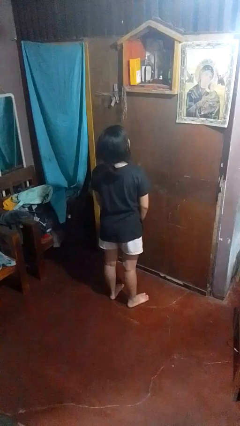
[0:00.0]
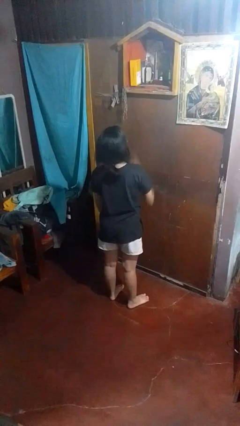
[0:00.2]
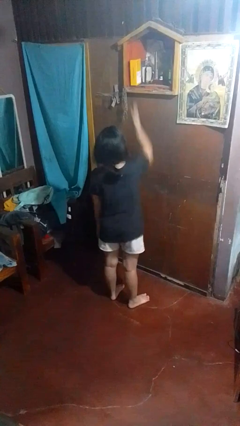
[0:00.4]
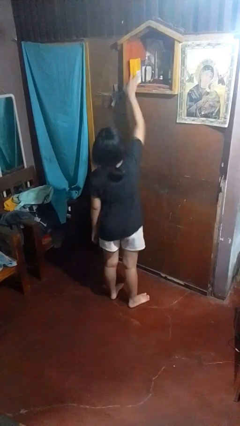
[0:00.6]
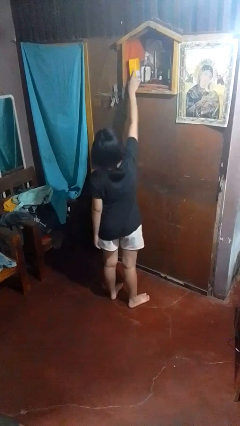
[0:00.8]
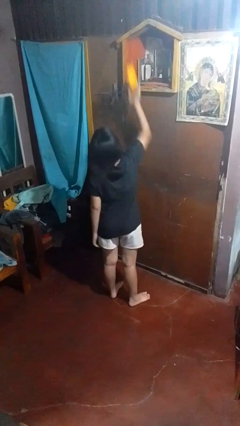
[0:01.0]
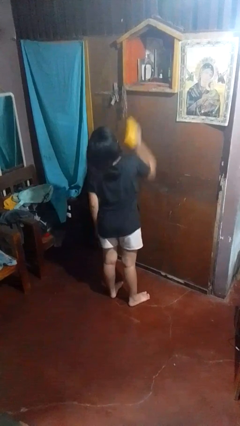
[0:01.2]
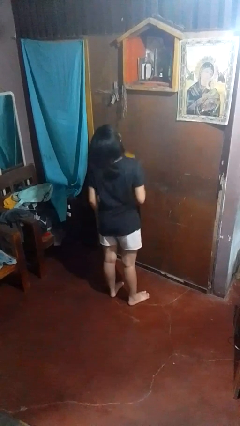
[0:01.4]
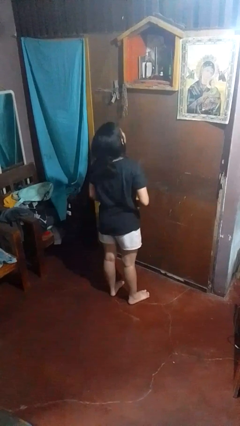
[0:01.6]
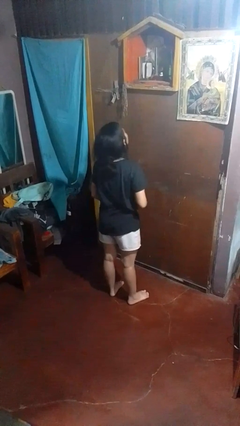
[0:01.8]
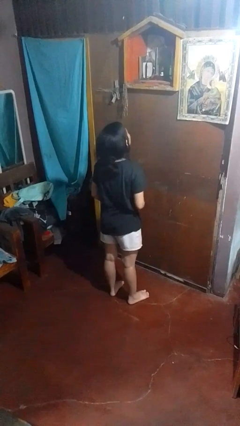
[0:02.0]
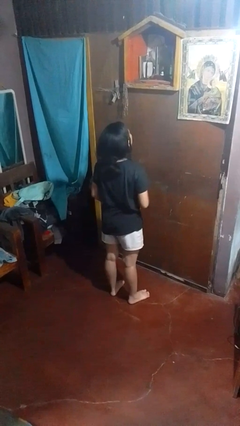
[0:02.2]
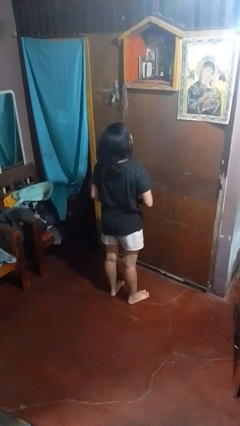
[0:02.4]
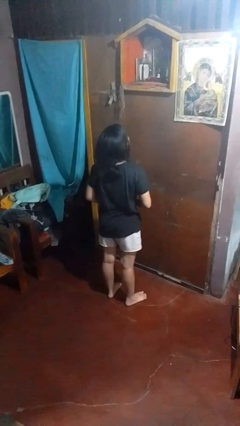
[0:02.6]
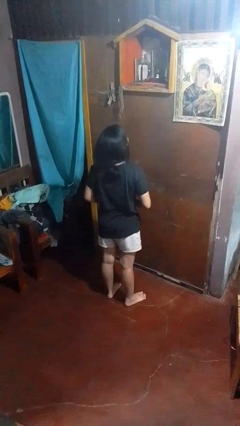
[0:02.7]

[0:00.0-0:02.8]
person picks up object from shelf

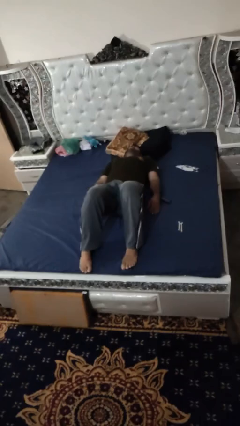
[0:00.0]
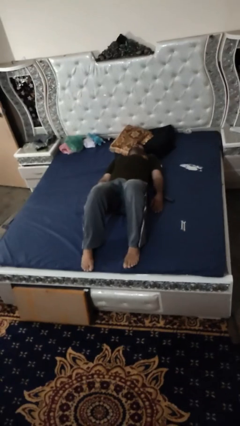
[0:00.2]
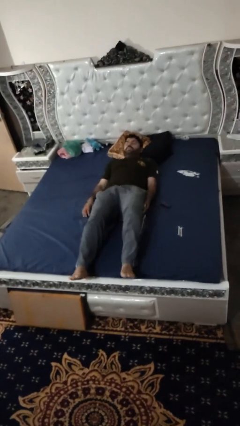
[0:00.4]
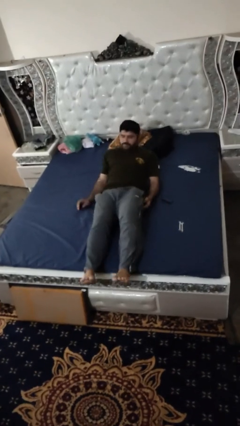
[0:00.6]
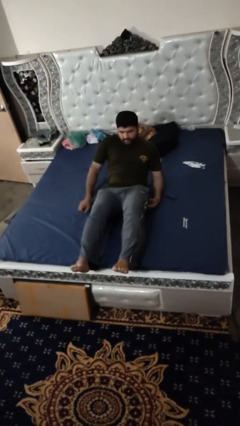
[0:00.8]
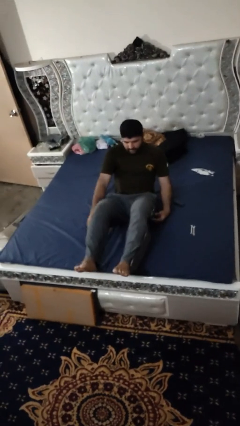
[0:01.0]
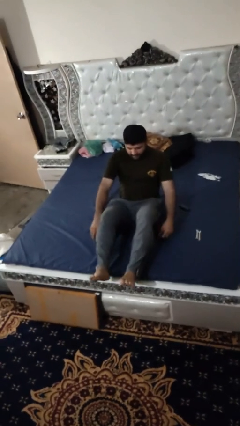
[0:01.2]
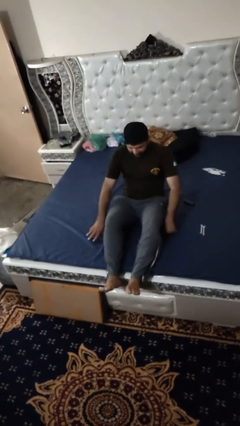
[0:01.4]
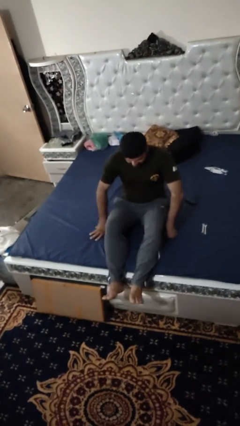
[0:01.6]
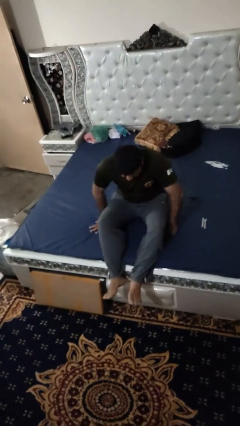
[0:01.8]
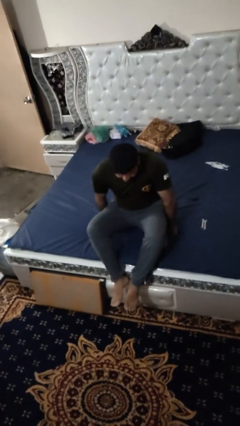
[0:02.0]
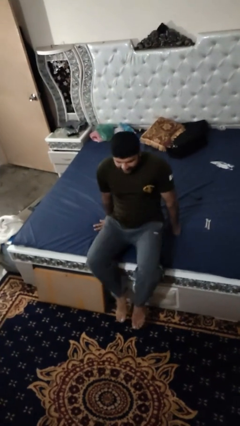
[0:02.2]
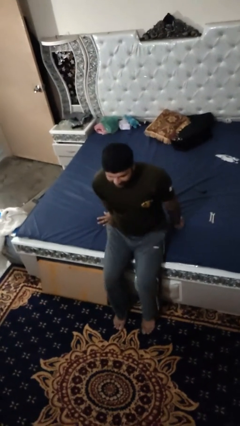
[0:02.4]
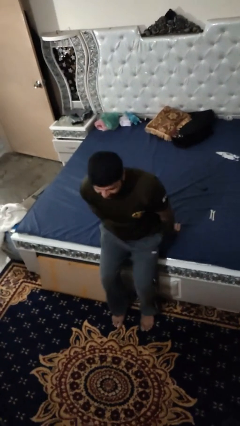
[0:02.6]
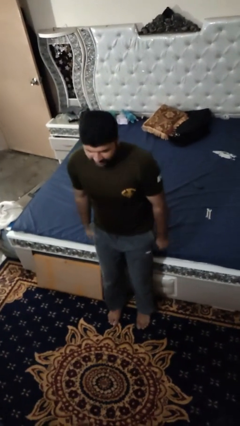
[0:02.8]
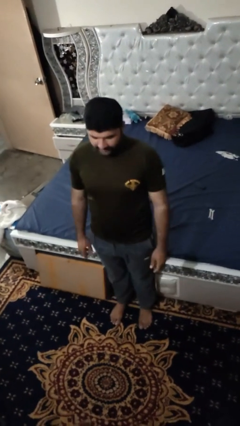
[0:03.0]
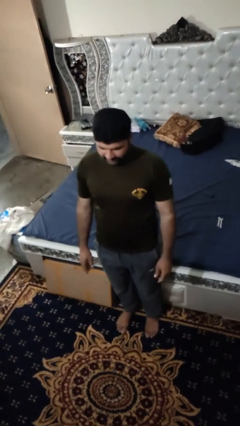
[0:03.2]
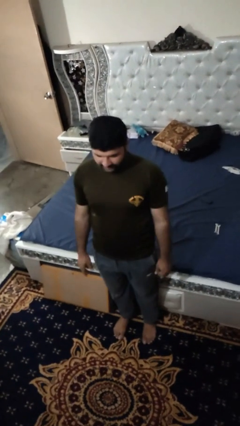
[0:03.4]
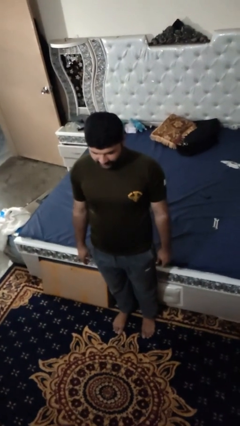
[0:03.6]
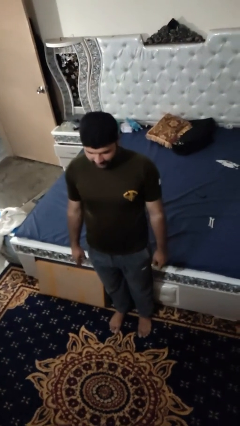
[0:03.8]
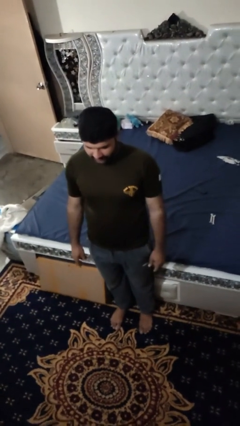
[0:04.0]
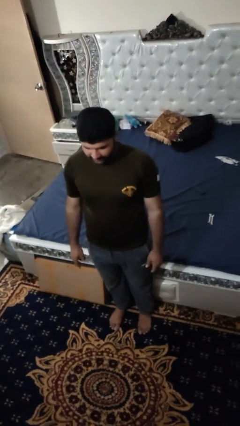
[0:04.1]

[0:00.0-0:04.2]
person stands up

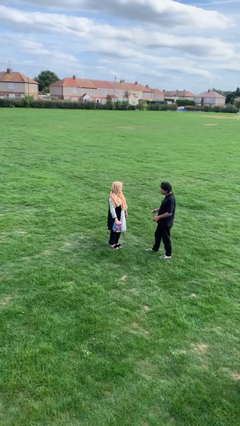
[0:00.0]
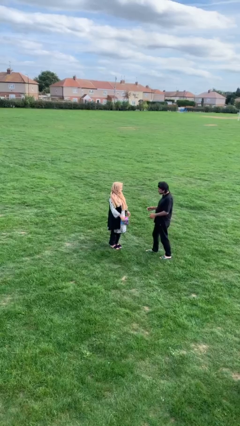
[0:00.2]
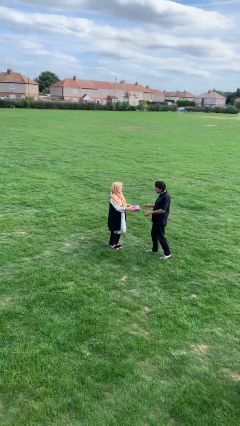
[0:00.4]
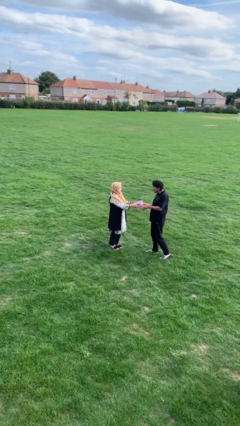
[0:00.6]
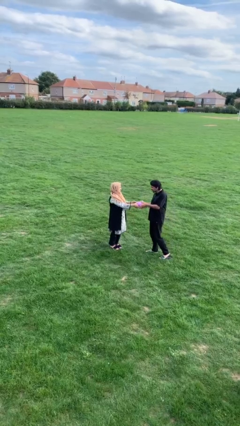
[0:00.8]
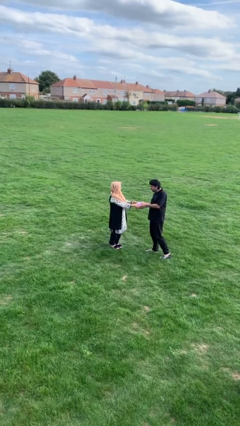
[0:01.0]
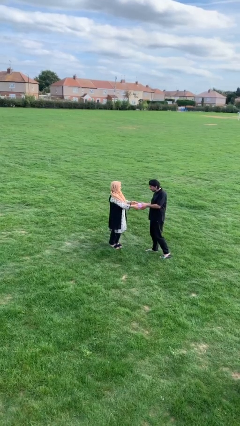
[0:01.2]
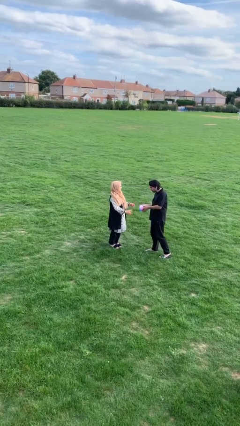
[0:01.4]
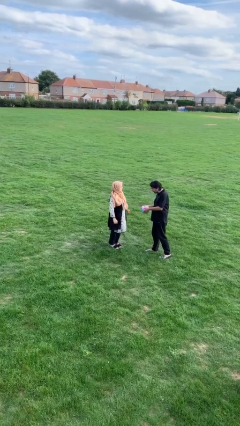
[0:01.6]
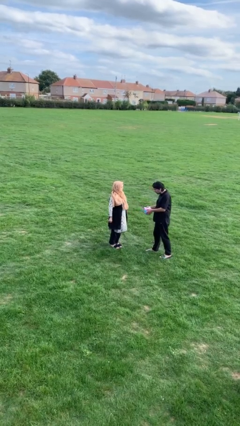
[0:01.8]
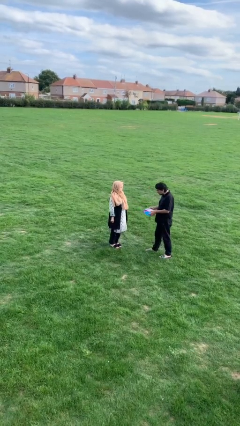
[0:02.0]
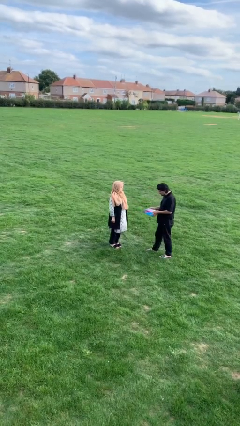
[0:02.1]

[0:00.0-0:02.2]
person transfers object to person

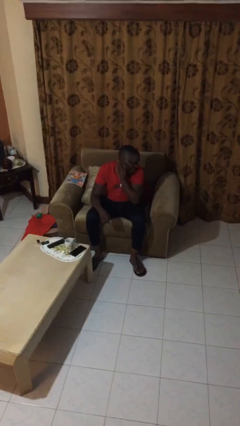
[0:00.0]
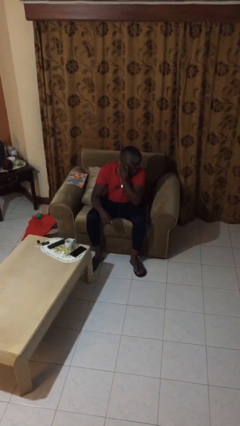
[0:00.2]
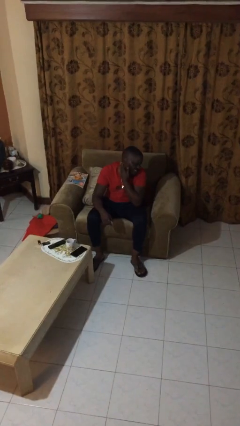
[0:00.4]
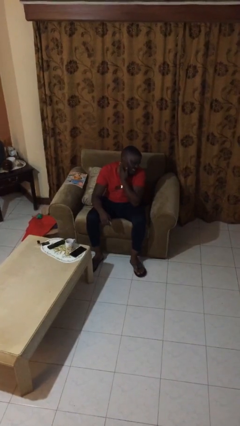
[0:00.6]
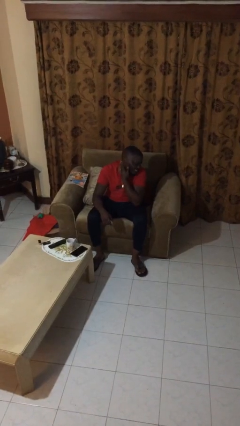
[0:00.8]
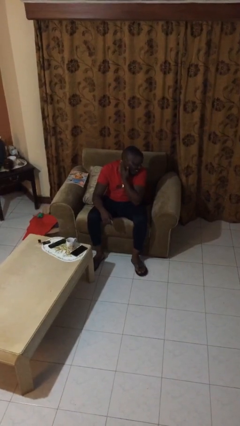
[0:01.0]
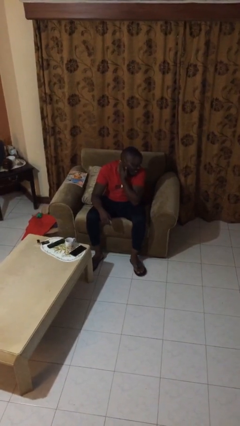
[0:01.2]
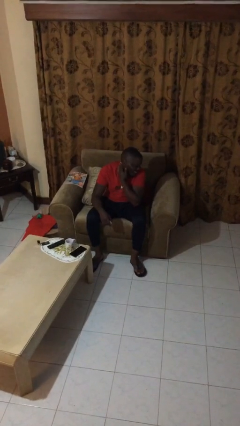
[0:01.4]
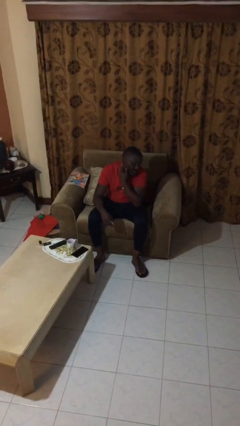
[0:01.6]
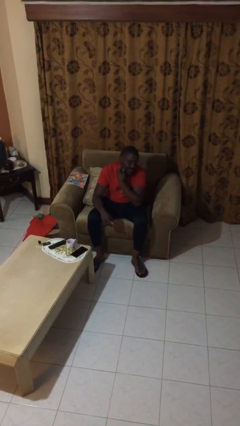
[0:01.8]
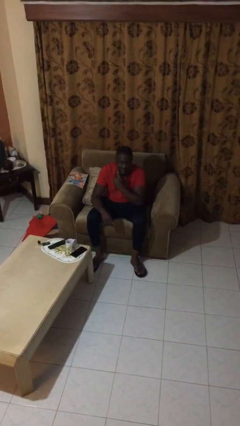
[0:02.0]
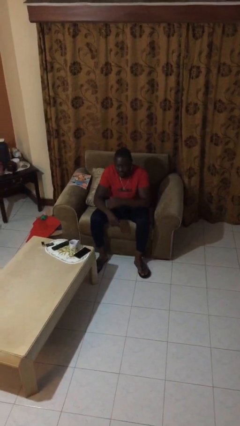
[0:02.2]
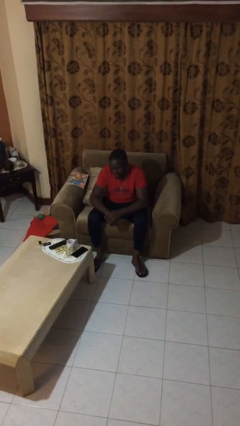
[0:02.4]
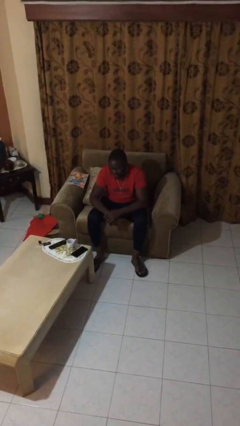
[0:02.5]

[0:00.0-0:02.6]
person swats bug

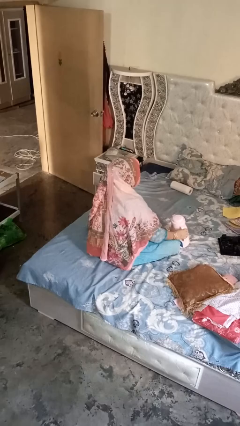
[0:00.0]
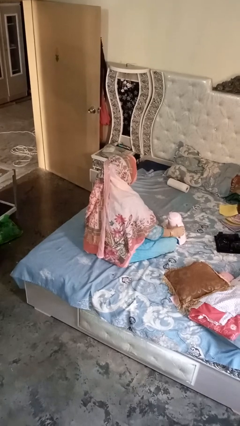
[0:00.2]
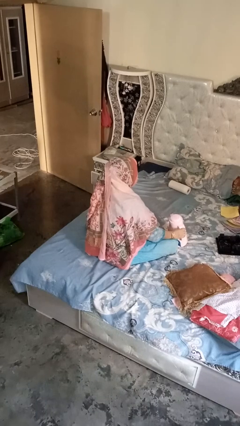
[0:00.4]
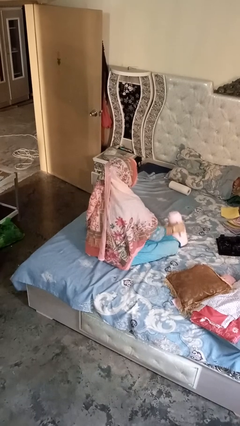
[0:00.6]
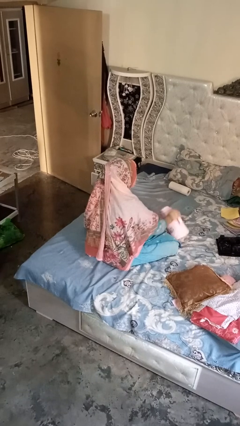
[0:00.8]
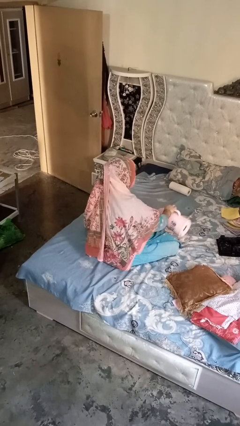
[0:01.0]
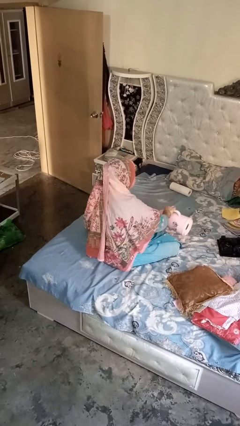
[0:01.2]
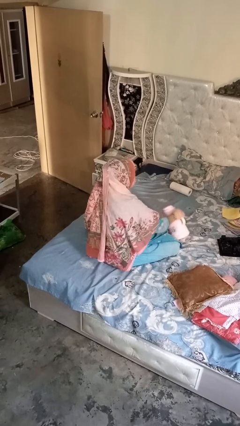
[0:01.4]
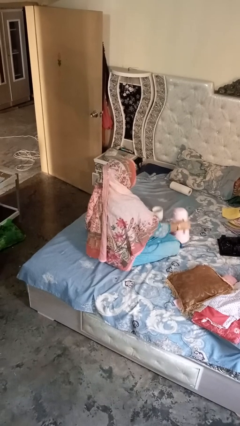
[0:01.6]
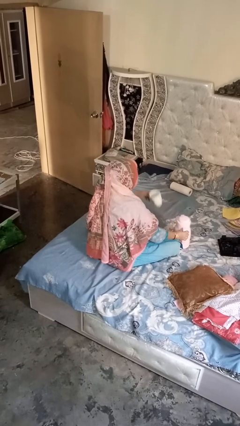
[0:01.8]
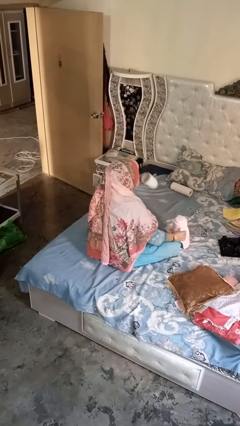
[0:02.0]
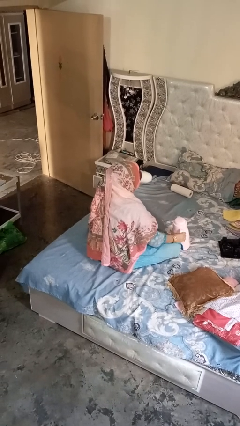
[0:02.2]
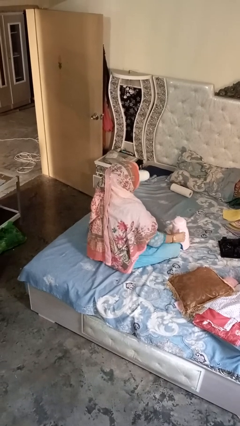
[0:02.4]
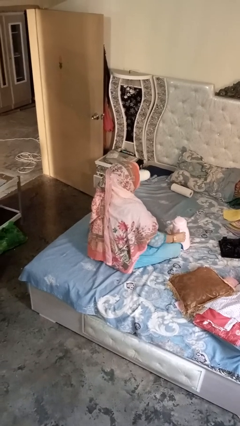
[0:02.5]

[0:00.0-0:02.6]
person pours coffee into mug

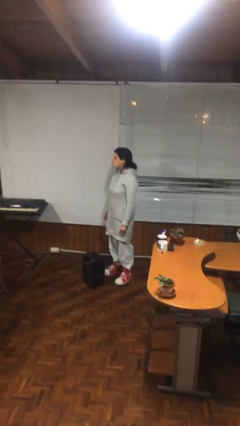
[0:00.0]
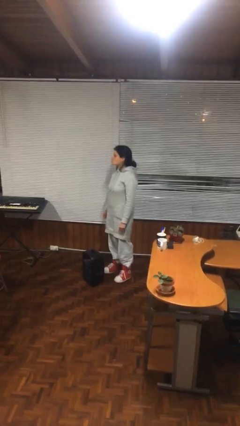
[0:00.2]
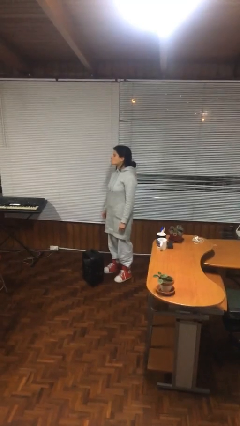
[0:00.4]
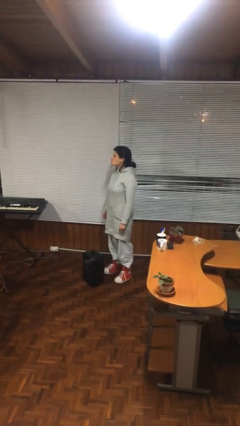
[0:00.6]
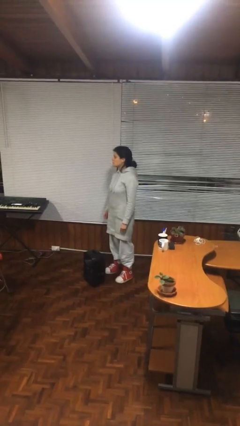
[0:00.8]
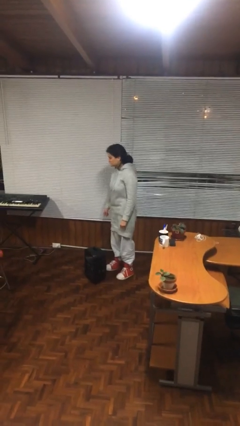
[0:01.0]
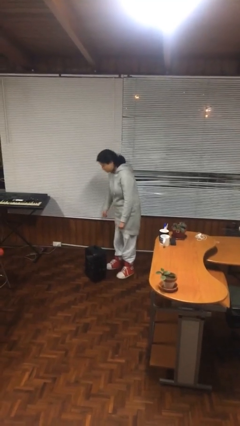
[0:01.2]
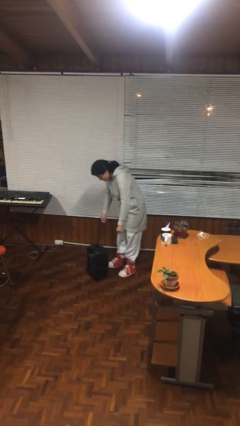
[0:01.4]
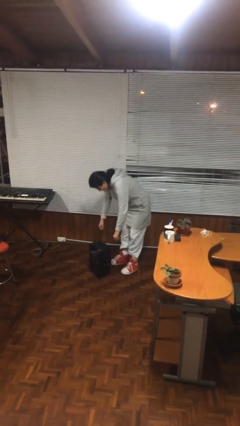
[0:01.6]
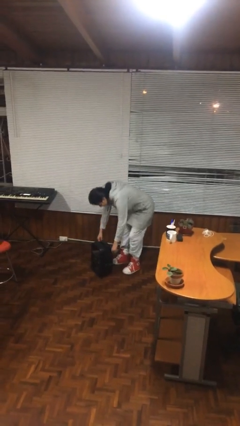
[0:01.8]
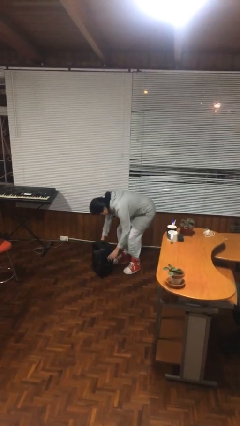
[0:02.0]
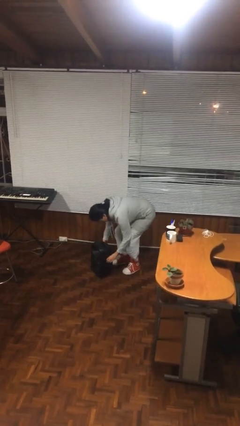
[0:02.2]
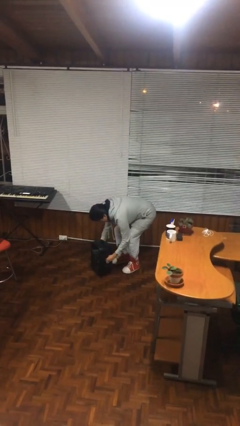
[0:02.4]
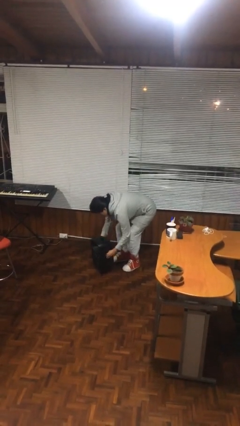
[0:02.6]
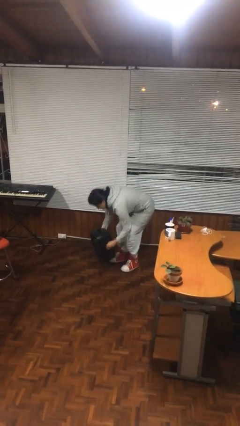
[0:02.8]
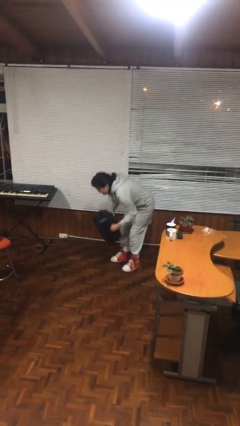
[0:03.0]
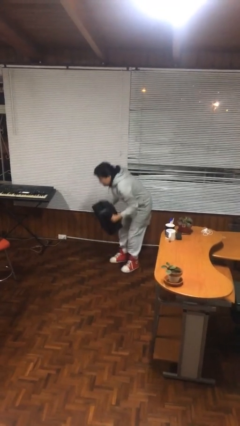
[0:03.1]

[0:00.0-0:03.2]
person picks up object from floor
